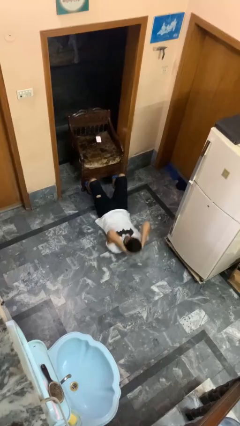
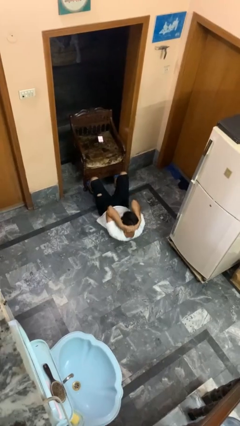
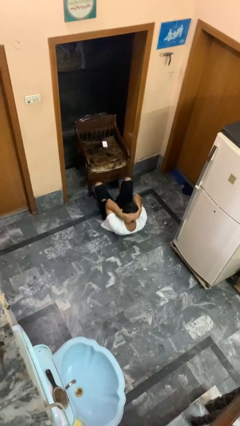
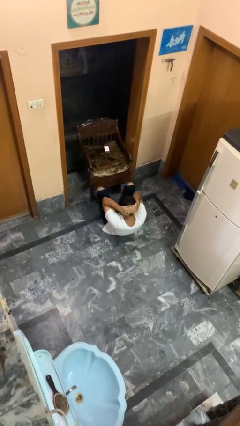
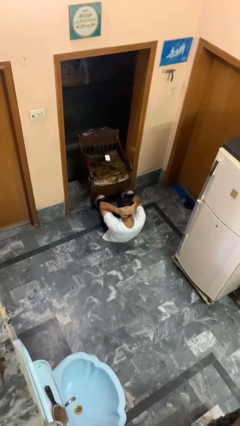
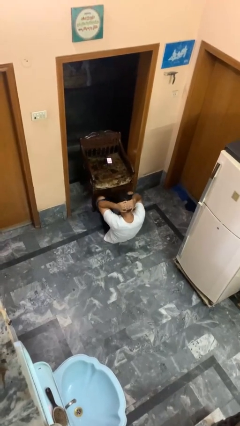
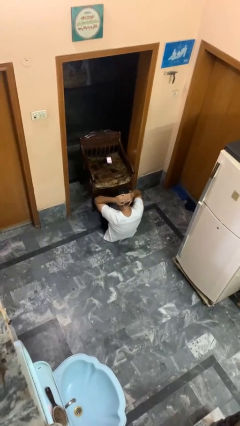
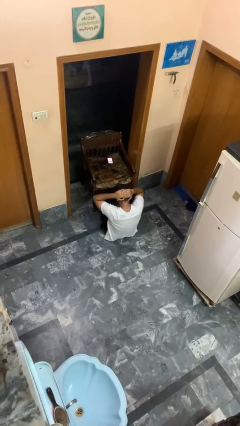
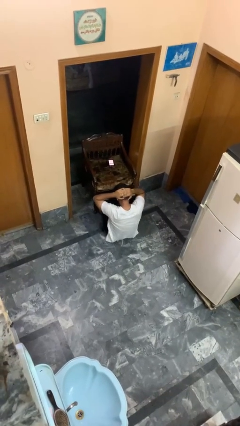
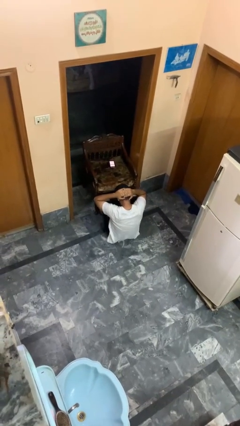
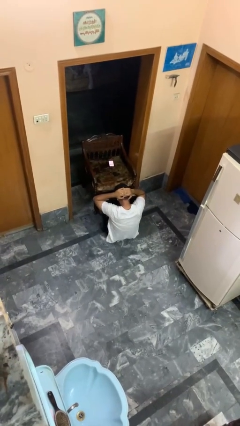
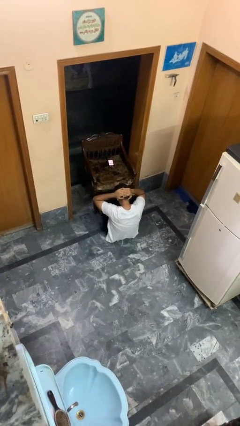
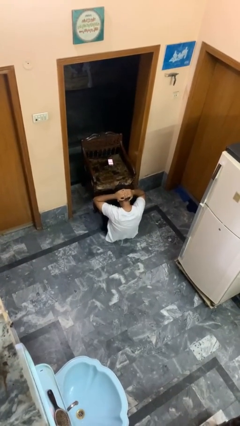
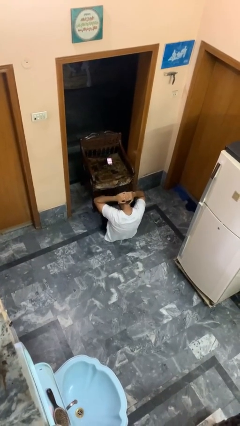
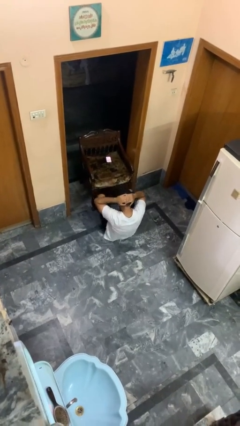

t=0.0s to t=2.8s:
person exercises with situp

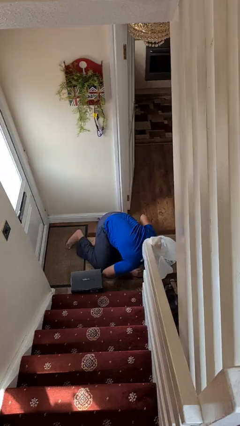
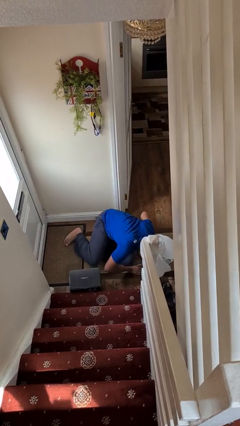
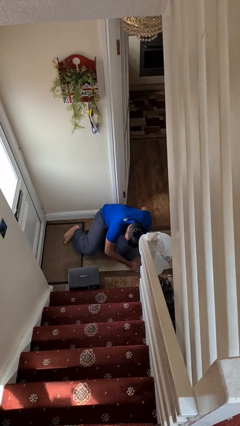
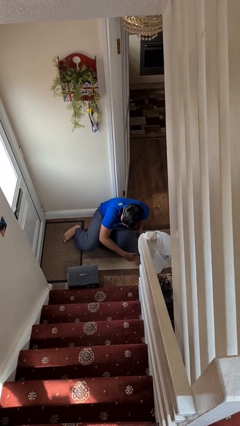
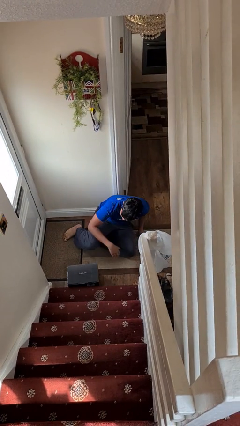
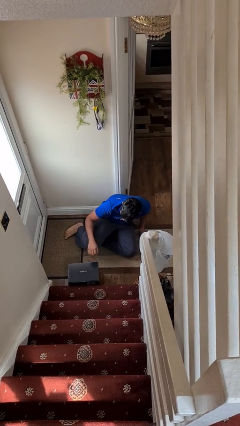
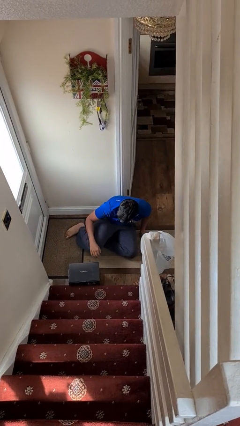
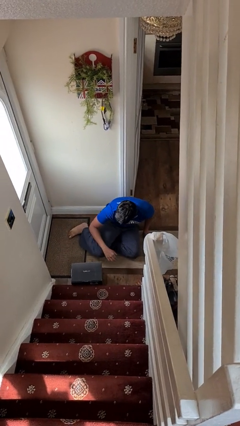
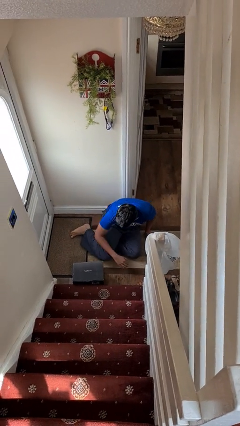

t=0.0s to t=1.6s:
person lies down on floor

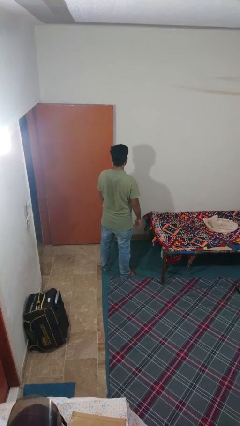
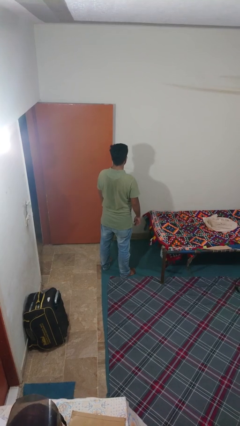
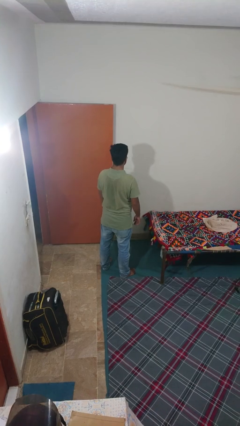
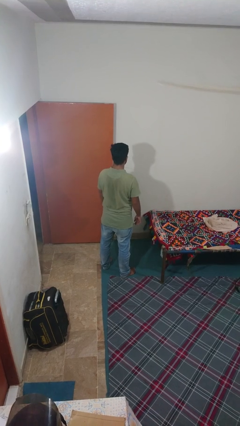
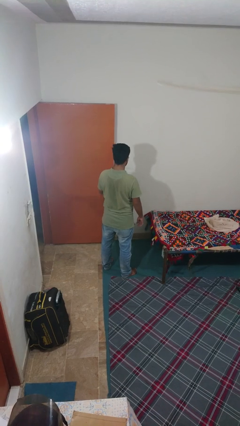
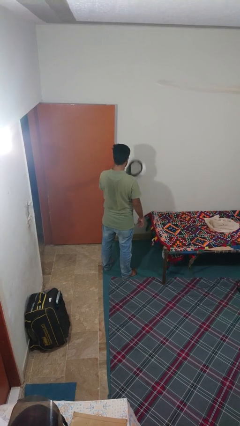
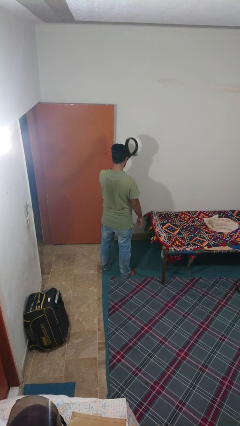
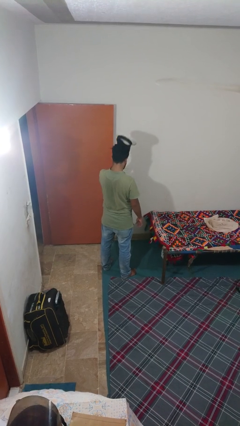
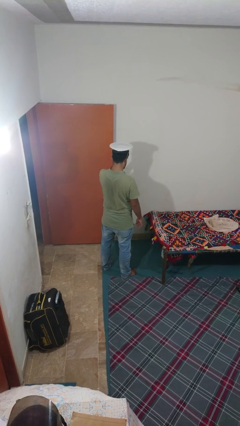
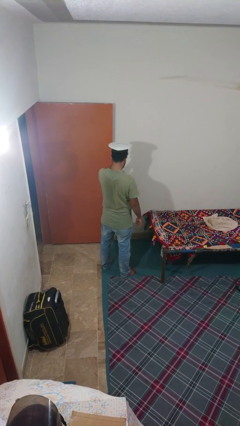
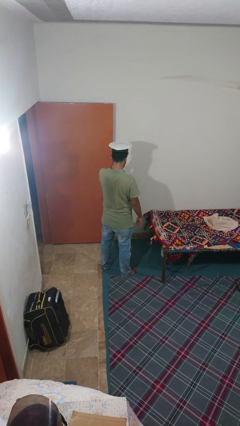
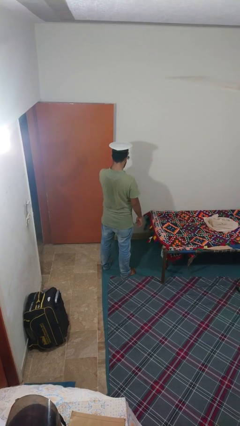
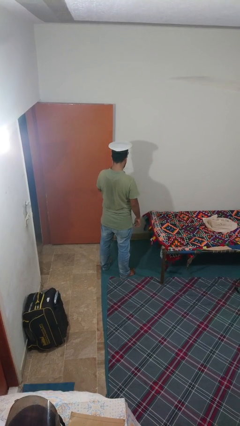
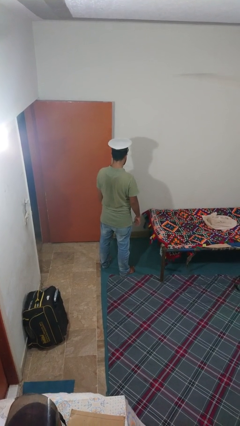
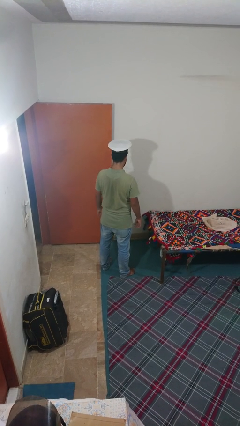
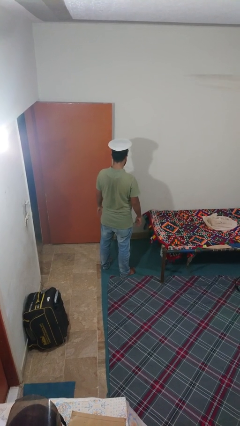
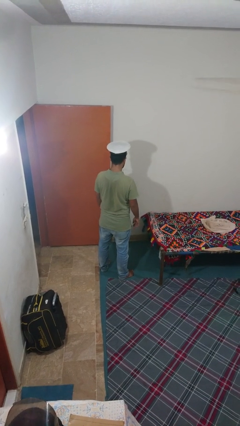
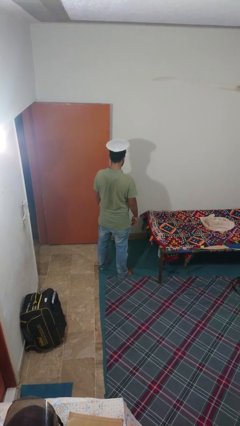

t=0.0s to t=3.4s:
person puts on hat

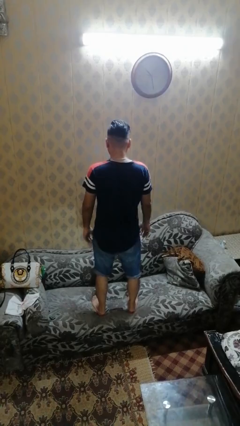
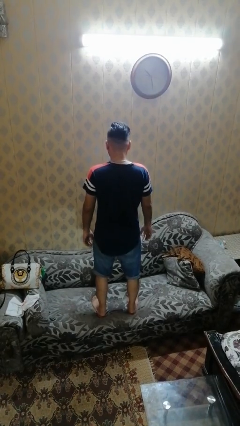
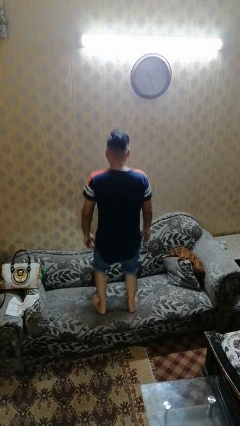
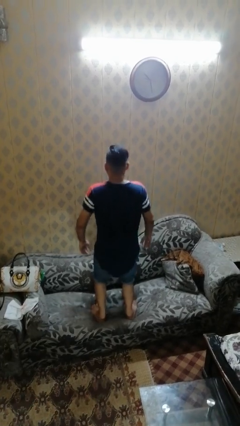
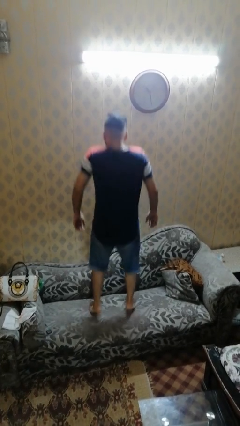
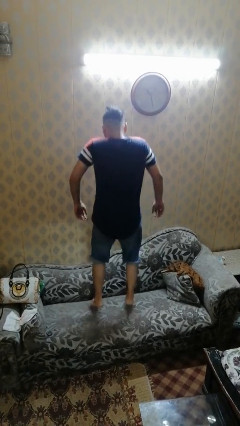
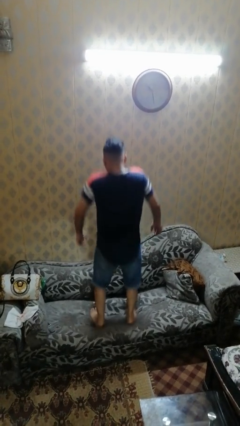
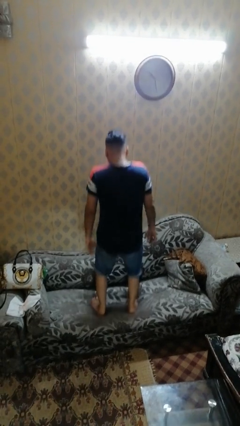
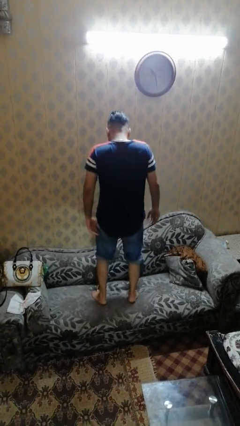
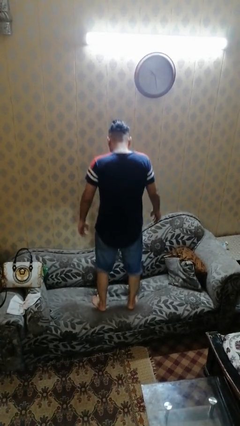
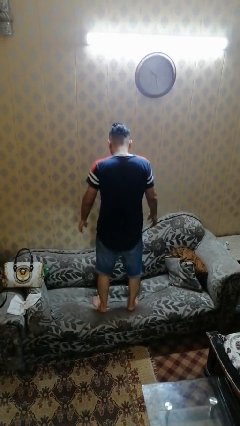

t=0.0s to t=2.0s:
person jumps on couch

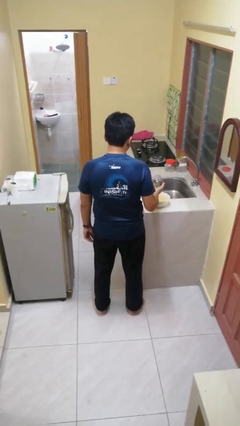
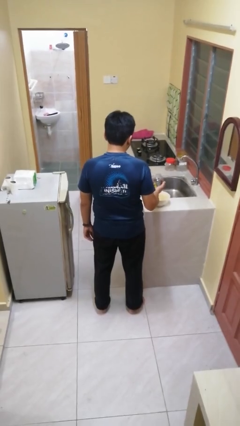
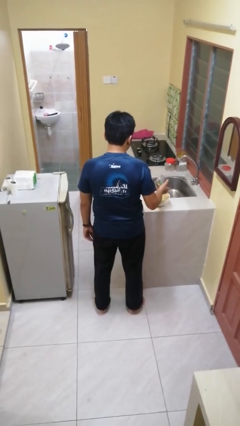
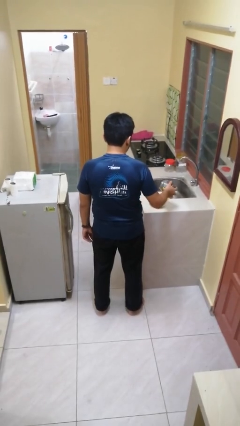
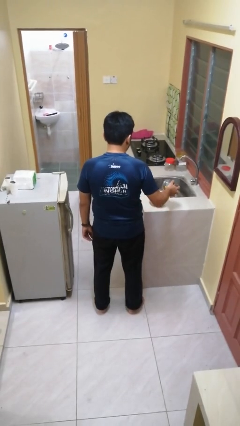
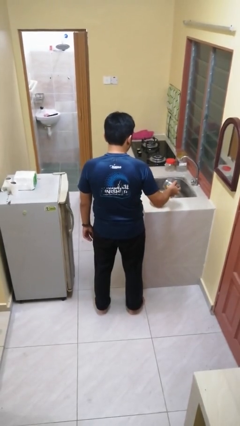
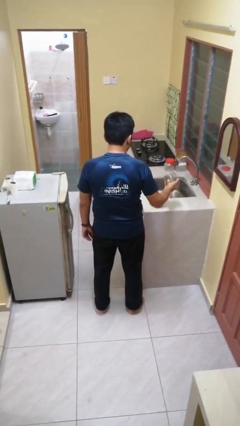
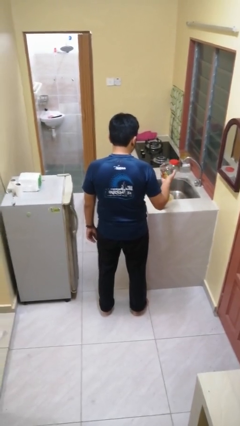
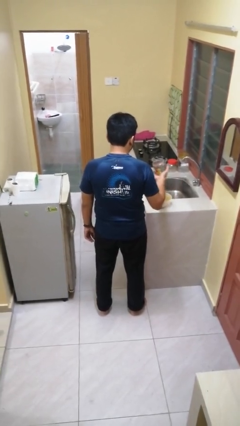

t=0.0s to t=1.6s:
person pours into bowl

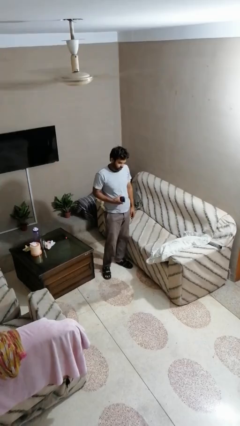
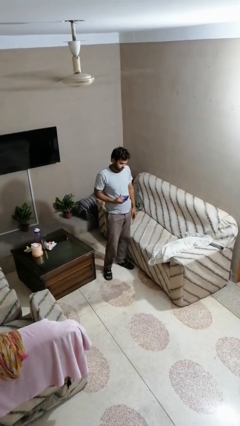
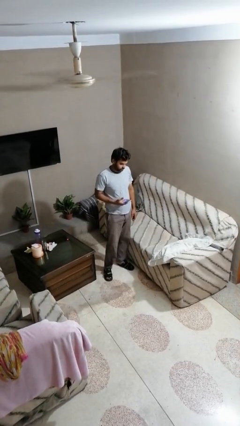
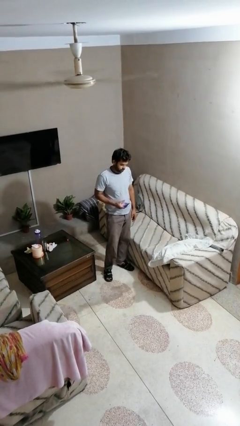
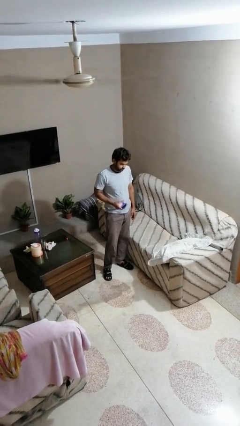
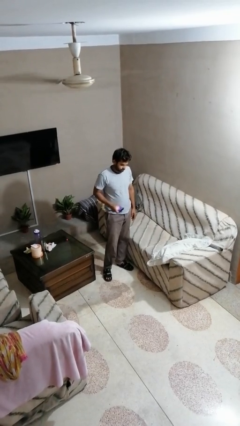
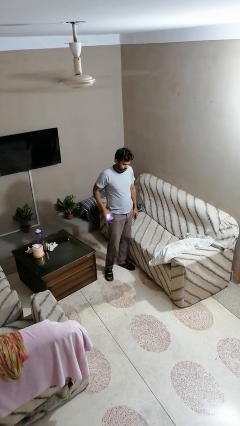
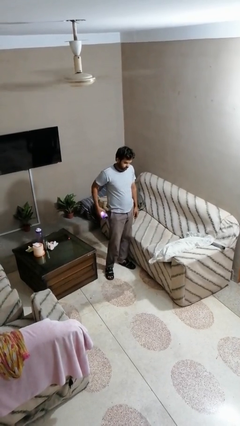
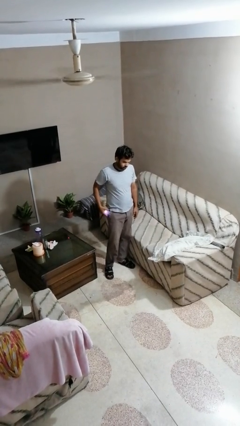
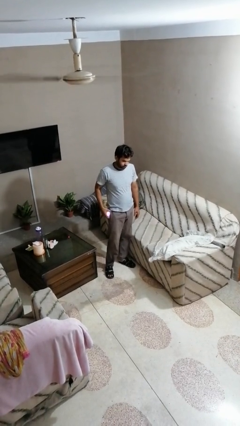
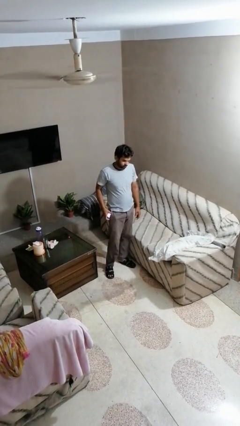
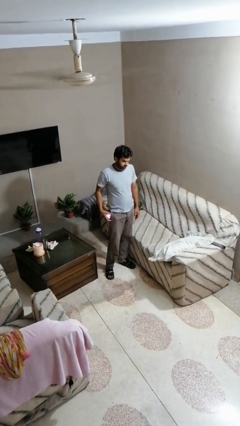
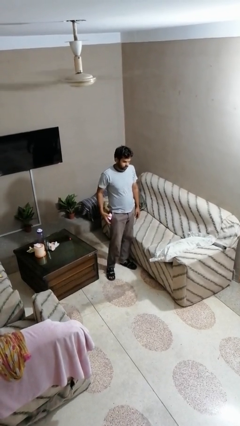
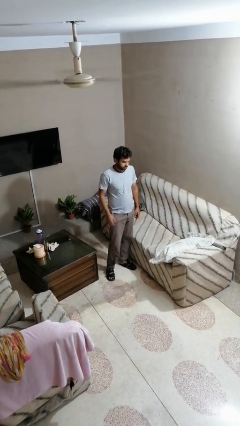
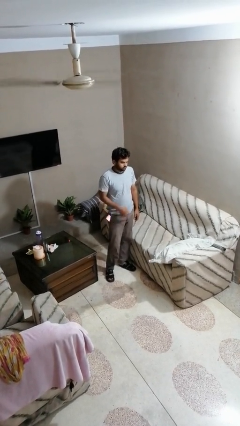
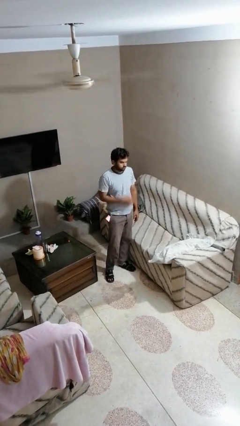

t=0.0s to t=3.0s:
person puts phone into pocket

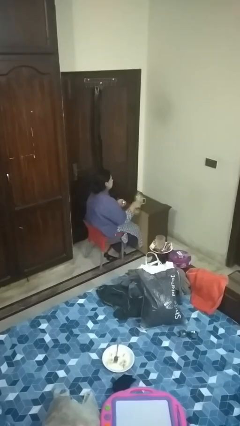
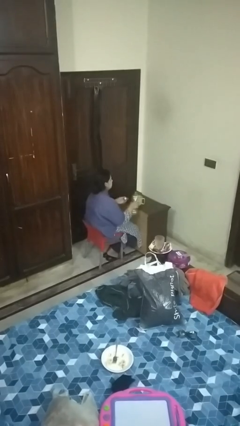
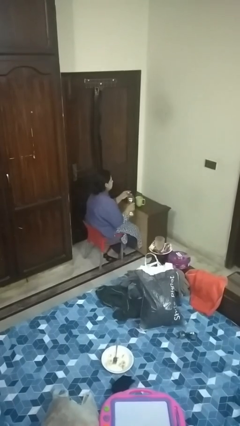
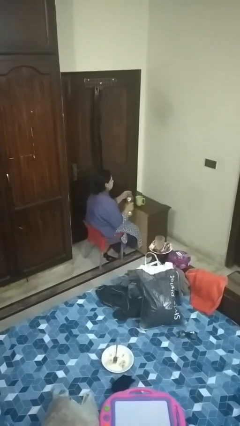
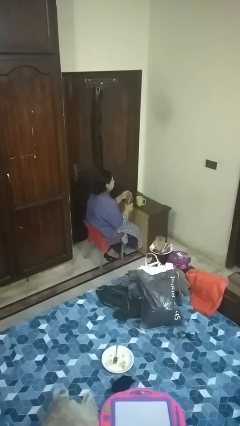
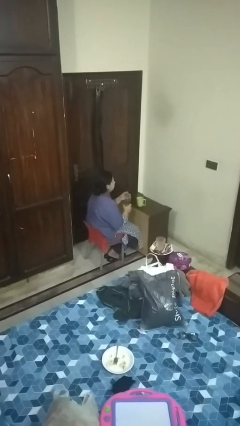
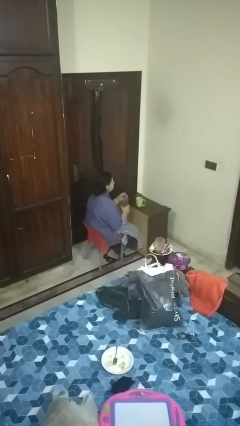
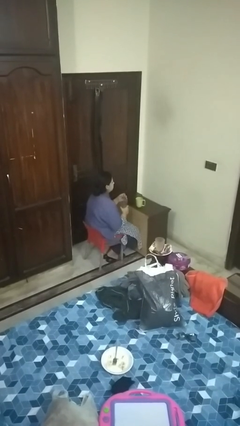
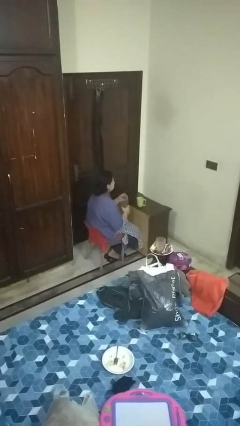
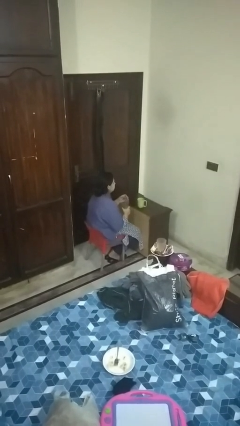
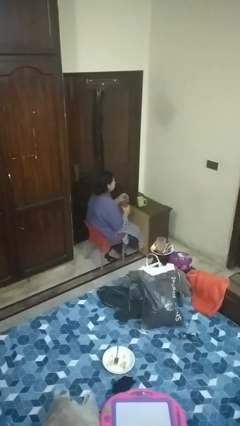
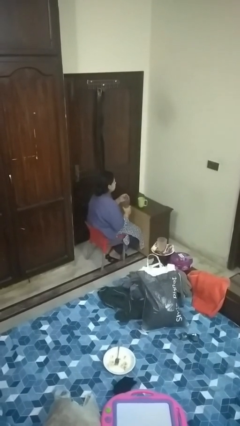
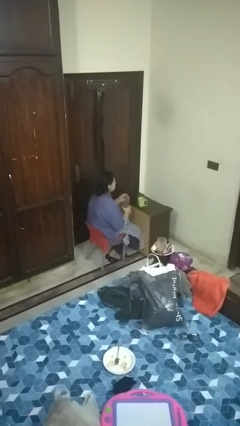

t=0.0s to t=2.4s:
person screws lid to bottle

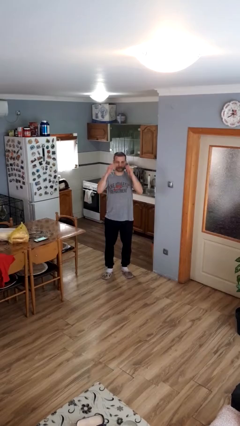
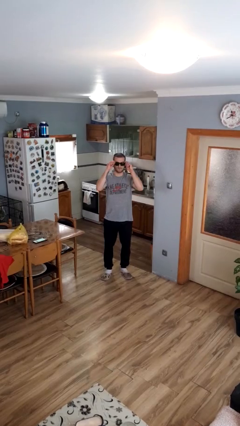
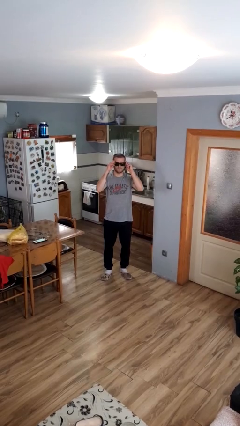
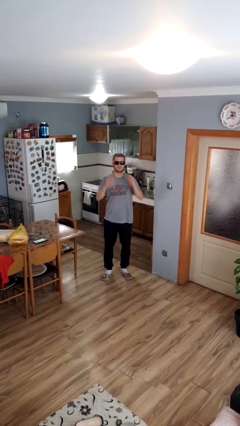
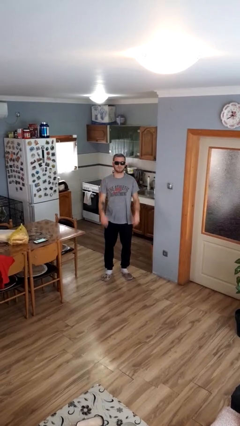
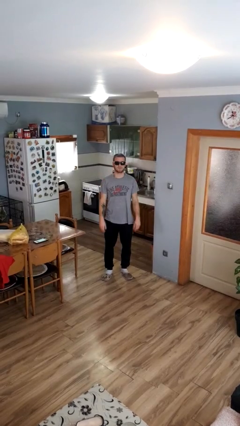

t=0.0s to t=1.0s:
person puts on sunglasses
